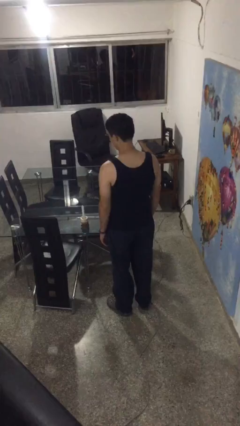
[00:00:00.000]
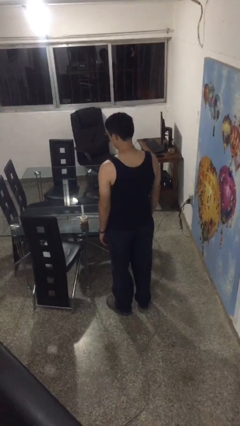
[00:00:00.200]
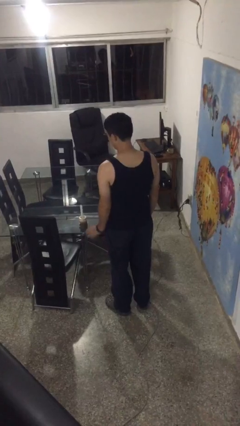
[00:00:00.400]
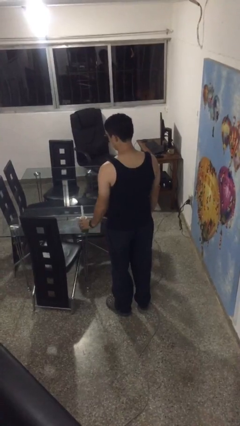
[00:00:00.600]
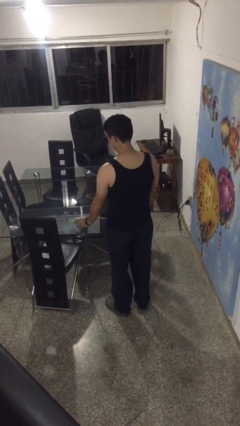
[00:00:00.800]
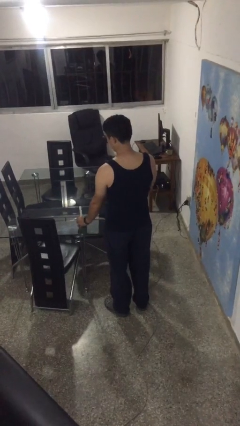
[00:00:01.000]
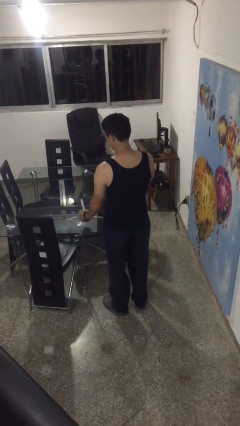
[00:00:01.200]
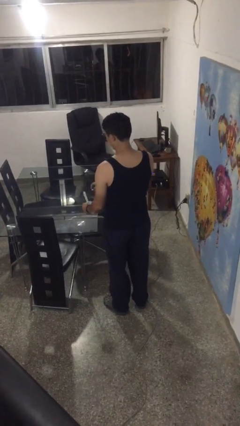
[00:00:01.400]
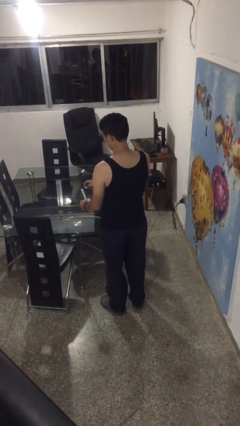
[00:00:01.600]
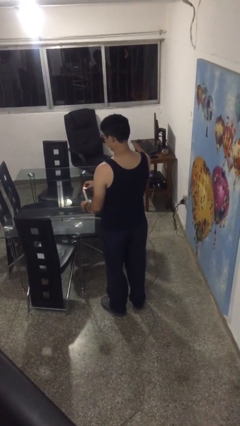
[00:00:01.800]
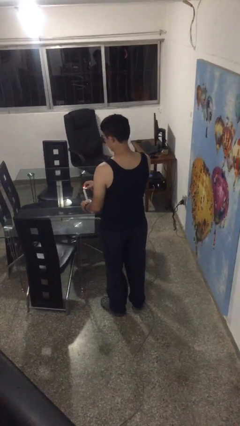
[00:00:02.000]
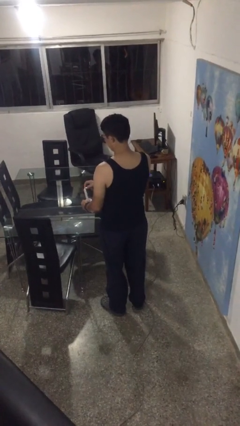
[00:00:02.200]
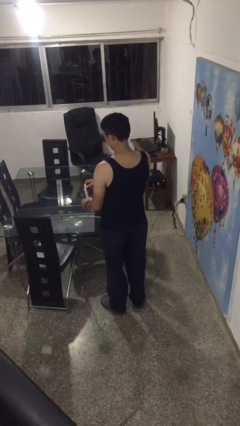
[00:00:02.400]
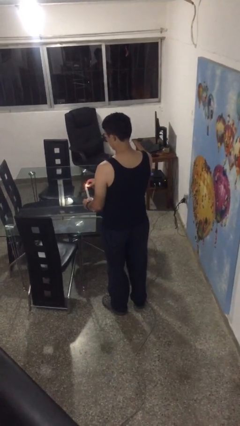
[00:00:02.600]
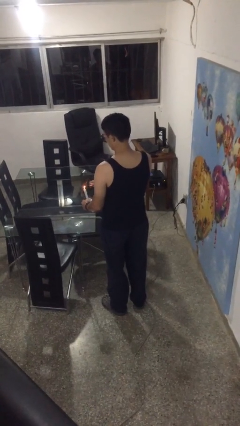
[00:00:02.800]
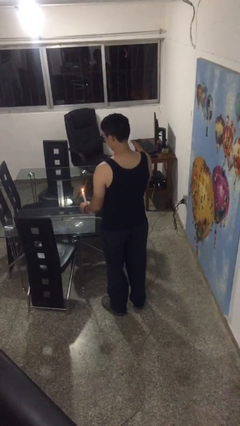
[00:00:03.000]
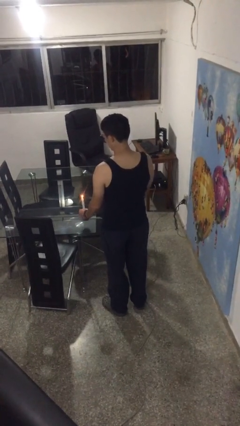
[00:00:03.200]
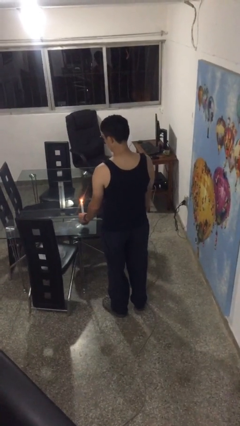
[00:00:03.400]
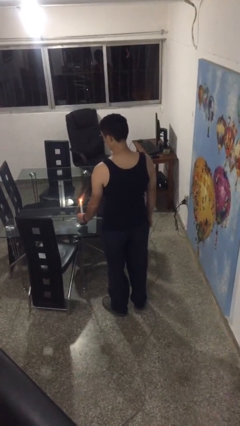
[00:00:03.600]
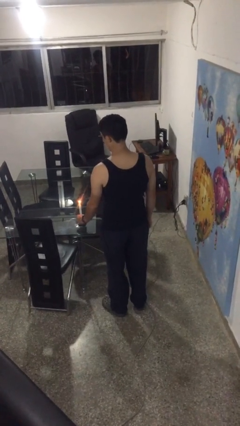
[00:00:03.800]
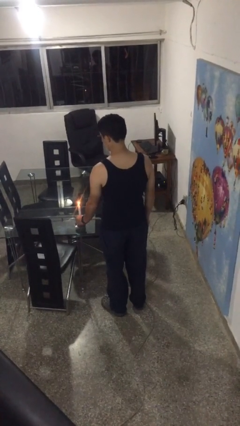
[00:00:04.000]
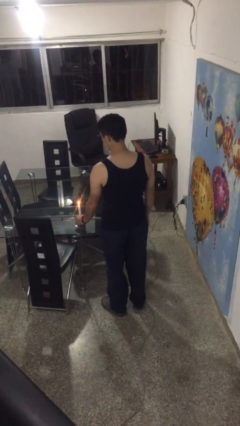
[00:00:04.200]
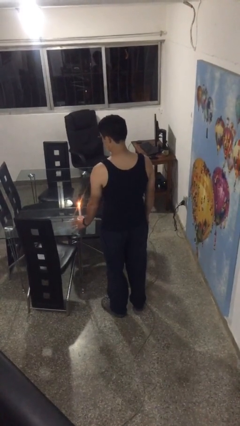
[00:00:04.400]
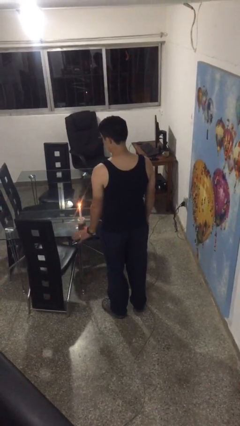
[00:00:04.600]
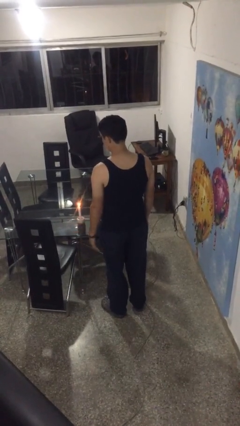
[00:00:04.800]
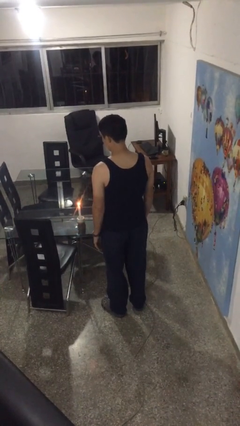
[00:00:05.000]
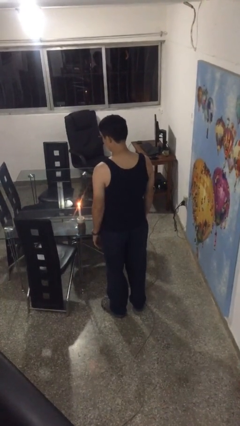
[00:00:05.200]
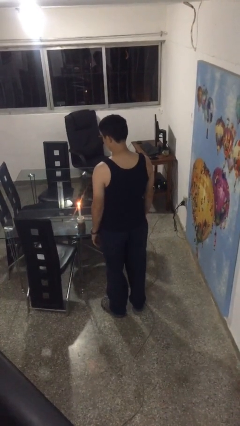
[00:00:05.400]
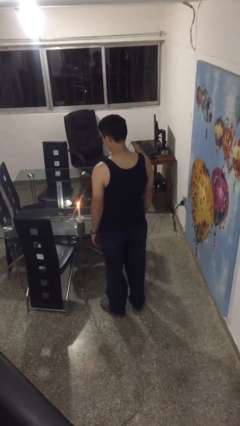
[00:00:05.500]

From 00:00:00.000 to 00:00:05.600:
person lights candle

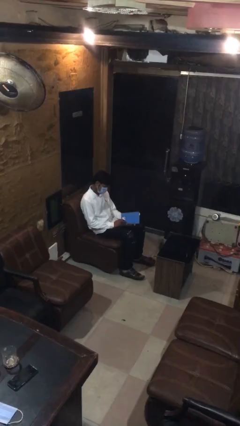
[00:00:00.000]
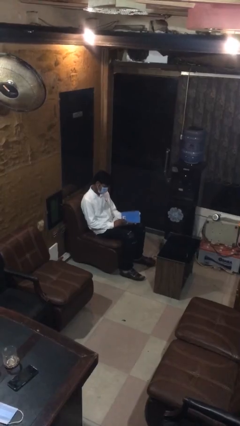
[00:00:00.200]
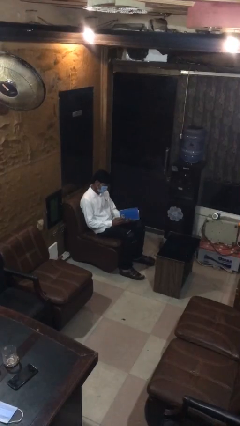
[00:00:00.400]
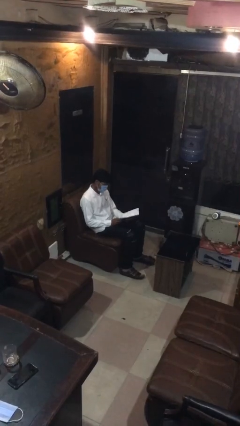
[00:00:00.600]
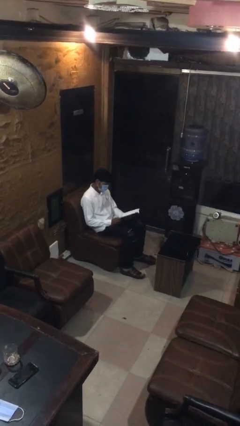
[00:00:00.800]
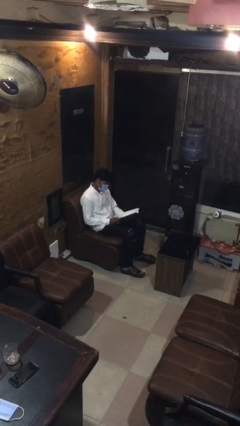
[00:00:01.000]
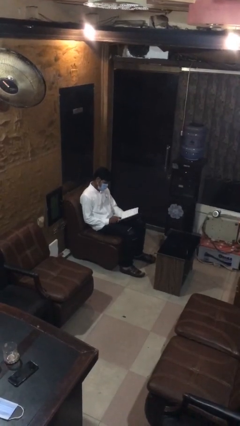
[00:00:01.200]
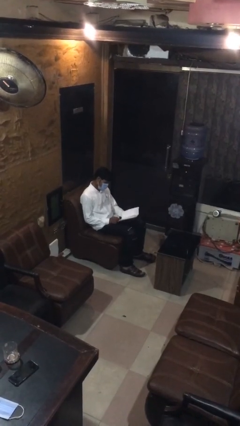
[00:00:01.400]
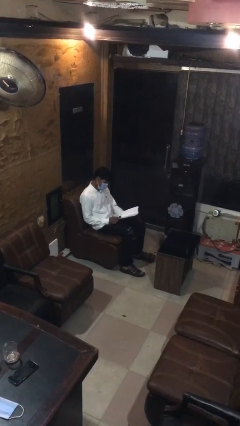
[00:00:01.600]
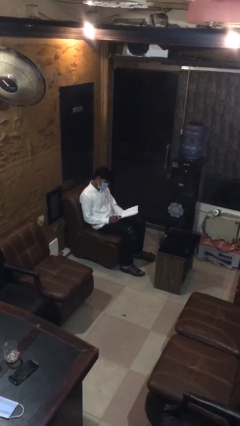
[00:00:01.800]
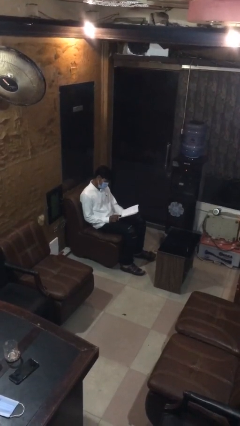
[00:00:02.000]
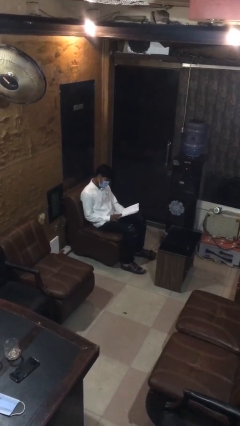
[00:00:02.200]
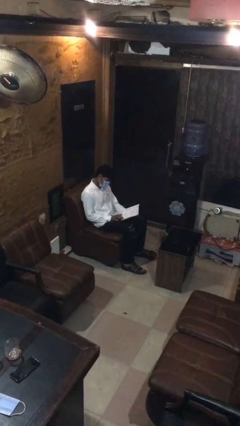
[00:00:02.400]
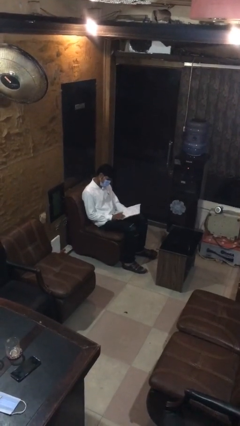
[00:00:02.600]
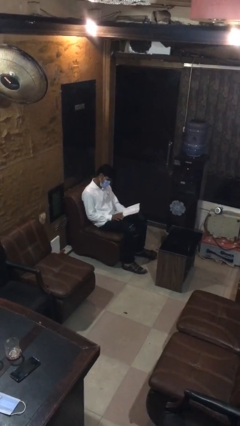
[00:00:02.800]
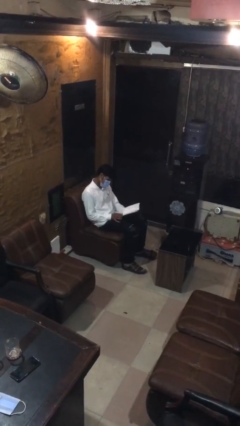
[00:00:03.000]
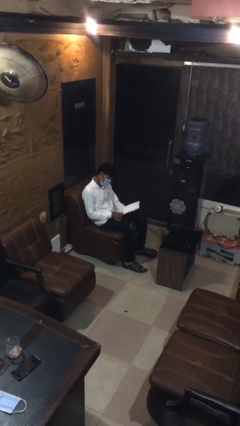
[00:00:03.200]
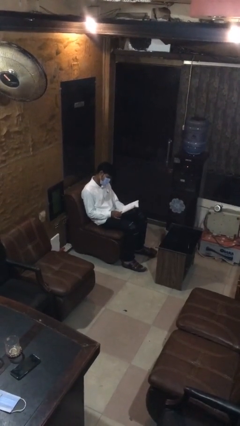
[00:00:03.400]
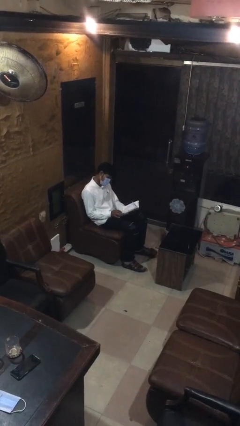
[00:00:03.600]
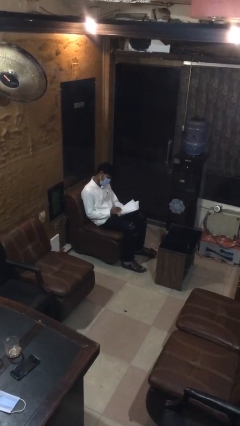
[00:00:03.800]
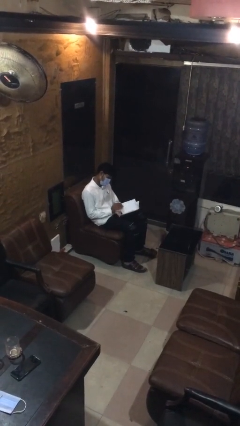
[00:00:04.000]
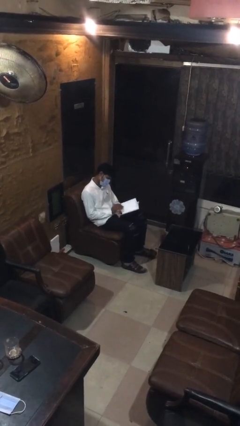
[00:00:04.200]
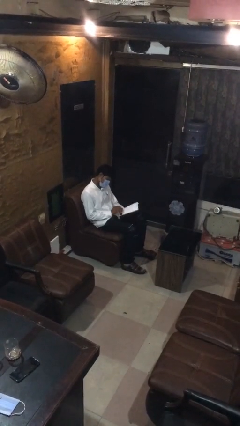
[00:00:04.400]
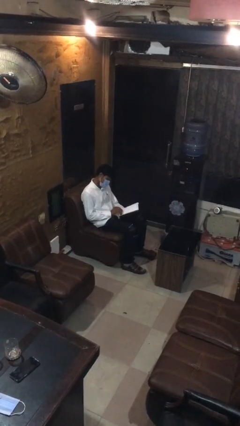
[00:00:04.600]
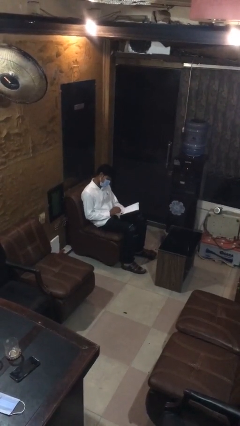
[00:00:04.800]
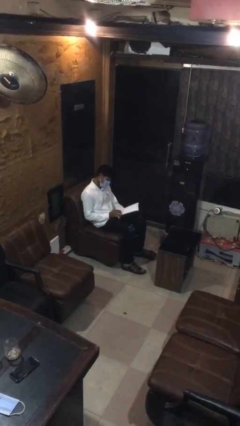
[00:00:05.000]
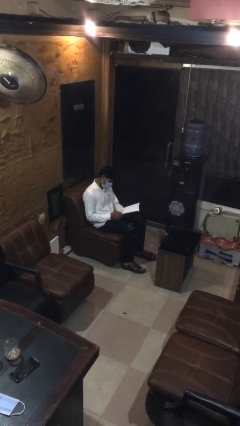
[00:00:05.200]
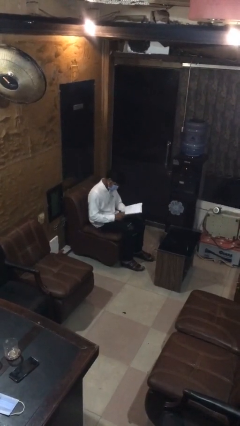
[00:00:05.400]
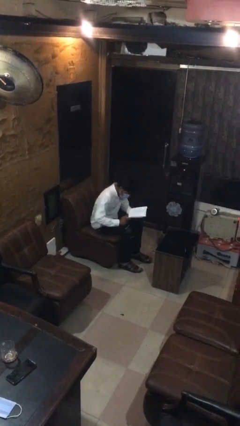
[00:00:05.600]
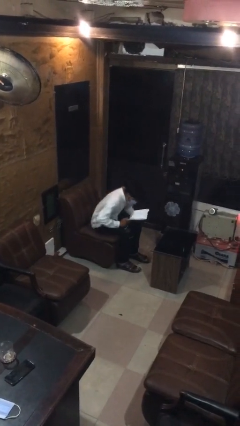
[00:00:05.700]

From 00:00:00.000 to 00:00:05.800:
person reads document

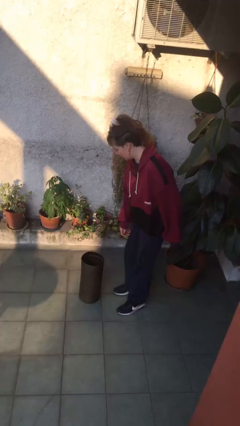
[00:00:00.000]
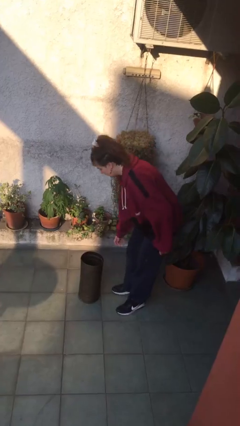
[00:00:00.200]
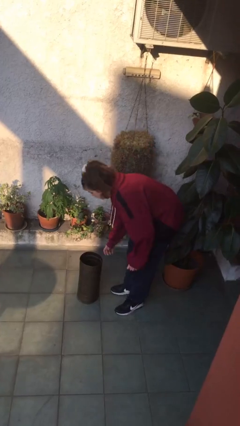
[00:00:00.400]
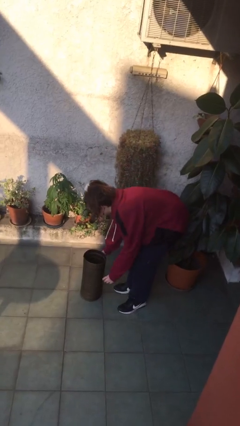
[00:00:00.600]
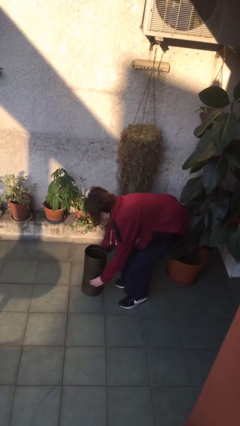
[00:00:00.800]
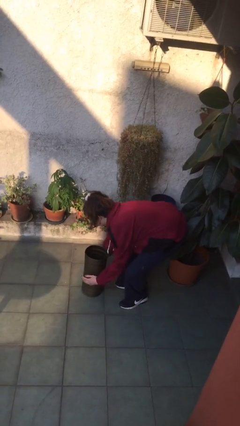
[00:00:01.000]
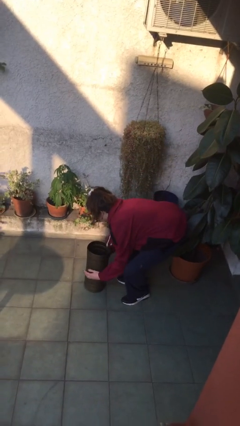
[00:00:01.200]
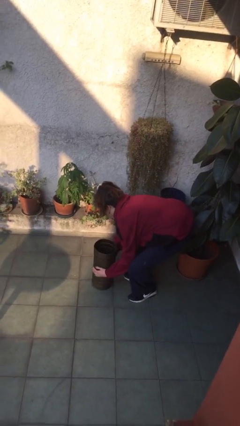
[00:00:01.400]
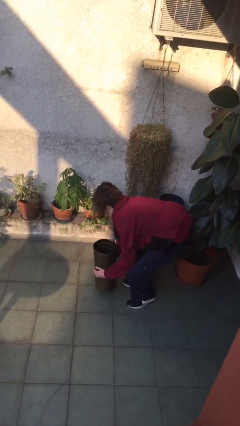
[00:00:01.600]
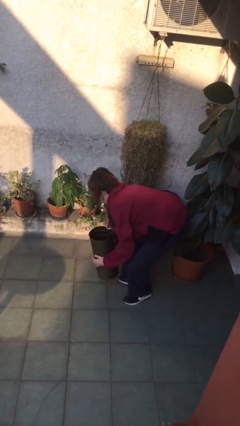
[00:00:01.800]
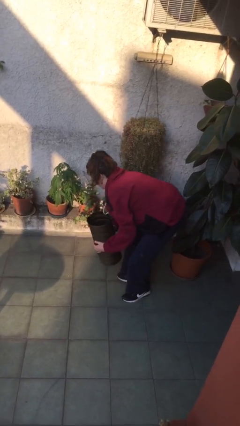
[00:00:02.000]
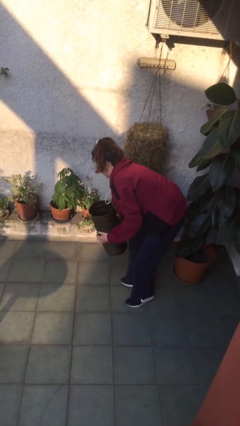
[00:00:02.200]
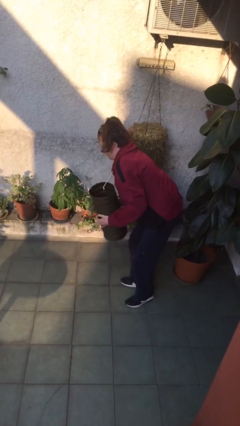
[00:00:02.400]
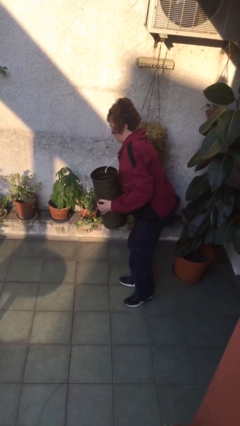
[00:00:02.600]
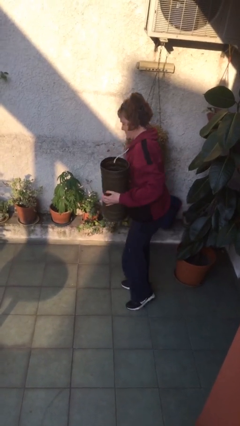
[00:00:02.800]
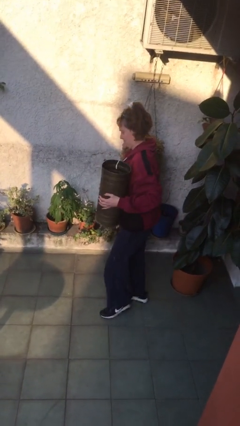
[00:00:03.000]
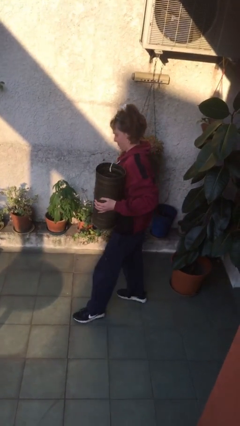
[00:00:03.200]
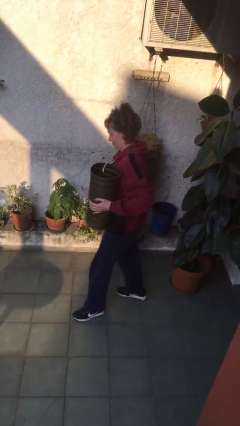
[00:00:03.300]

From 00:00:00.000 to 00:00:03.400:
person picks up object from floor

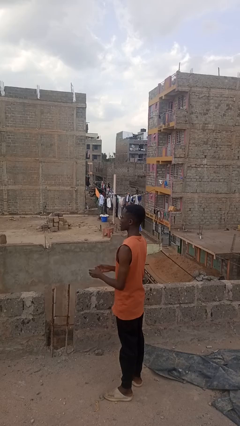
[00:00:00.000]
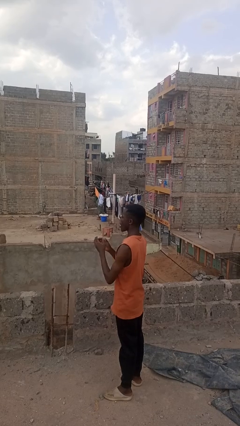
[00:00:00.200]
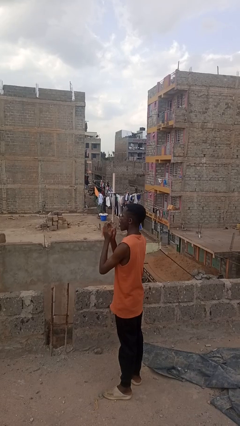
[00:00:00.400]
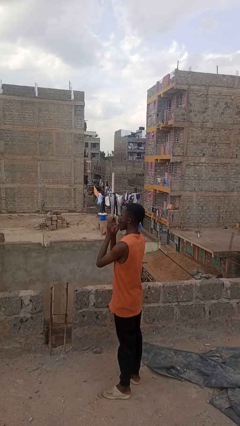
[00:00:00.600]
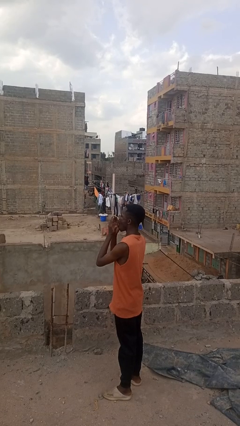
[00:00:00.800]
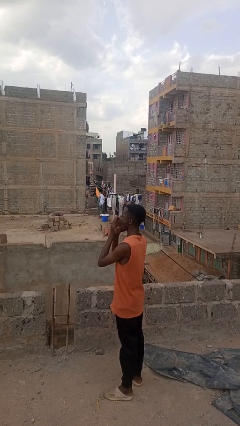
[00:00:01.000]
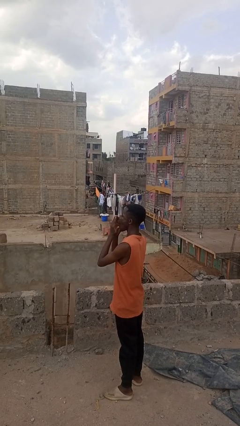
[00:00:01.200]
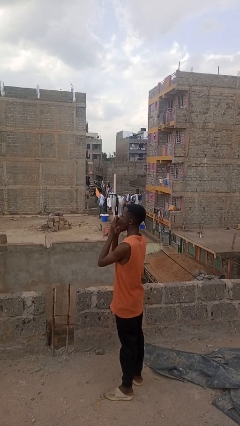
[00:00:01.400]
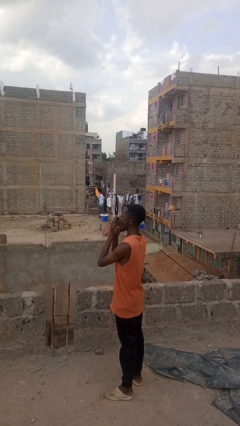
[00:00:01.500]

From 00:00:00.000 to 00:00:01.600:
person blows into hands

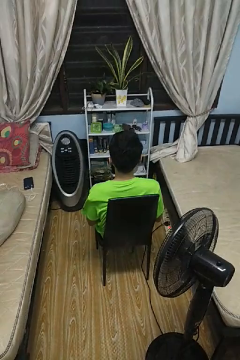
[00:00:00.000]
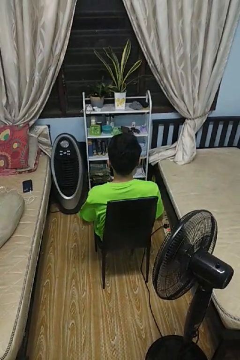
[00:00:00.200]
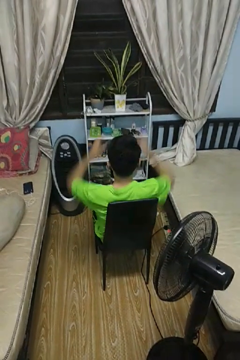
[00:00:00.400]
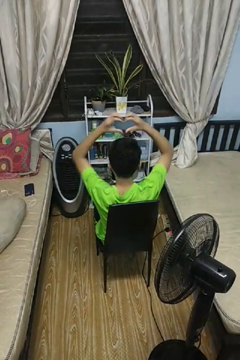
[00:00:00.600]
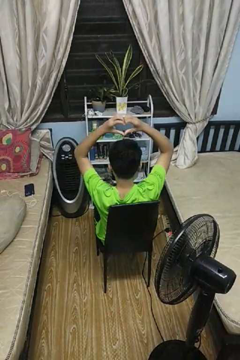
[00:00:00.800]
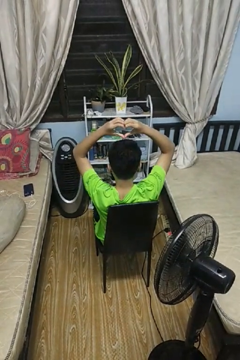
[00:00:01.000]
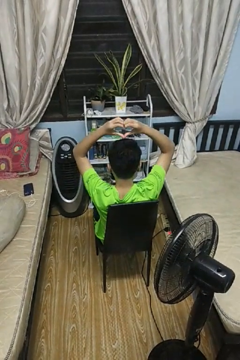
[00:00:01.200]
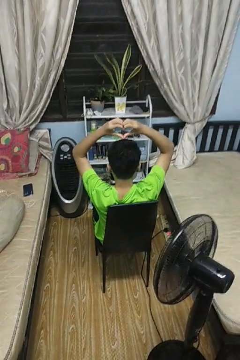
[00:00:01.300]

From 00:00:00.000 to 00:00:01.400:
person gestures heart
